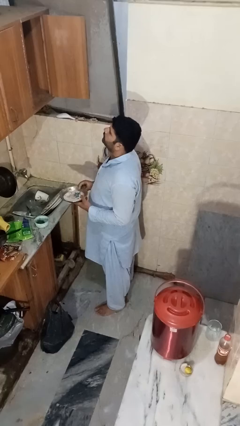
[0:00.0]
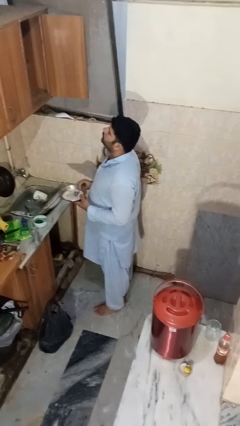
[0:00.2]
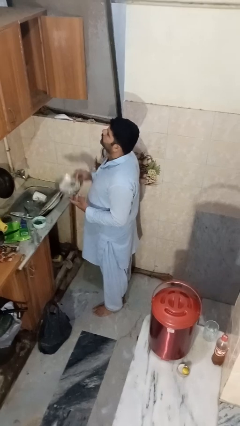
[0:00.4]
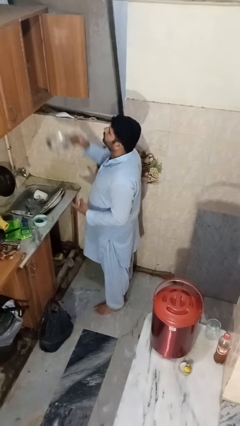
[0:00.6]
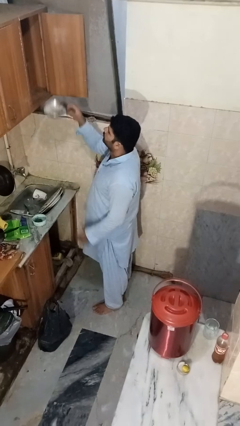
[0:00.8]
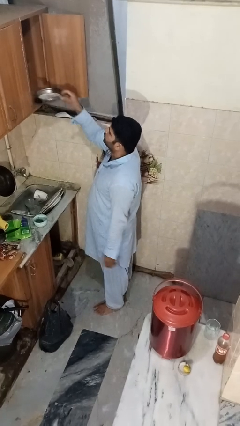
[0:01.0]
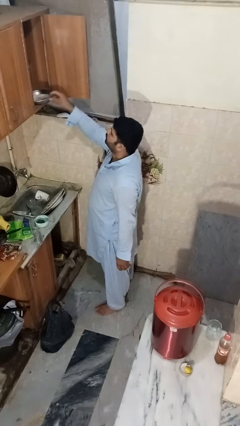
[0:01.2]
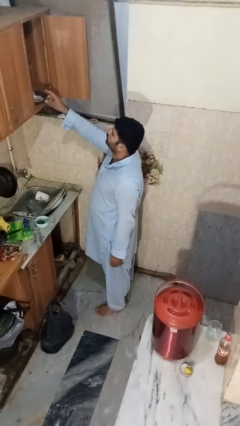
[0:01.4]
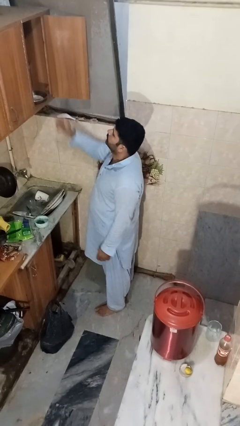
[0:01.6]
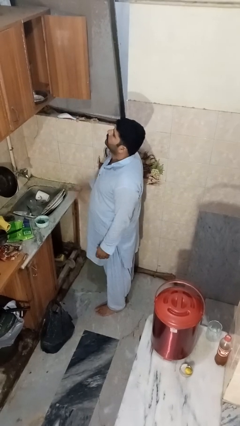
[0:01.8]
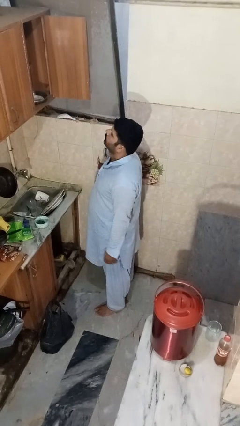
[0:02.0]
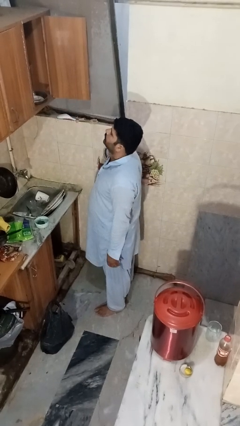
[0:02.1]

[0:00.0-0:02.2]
person puts object in cabinet

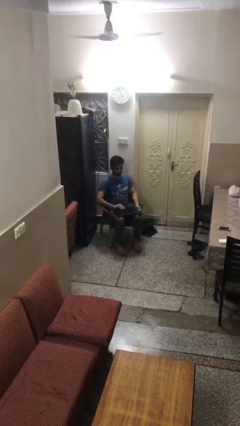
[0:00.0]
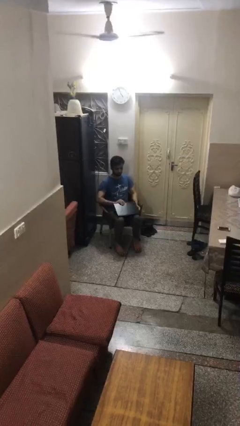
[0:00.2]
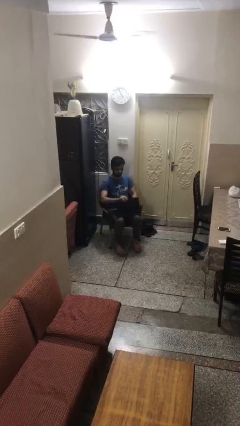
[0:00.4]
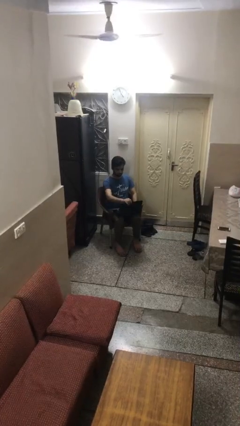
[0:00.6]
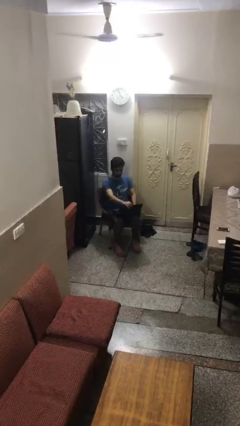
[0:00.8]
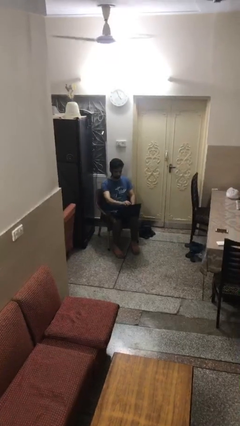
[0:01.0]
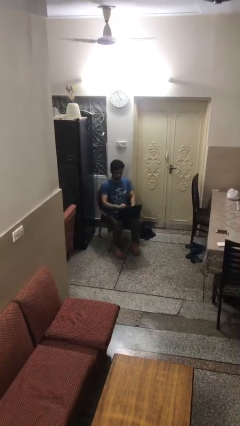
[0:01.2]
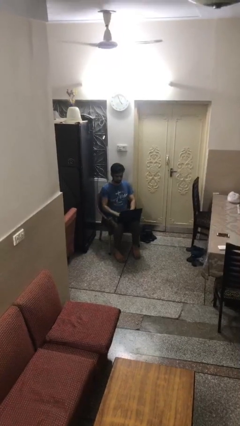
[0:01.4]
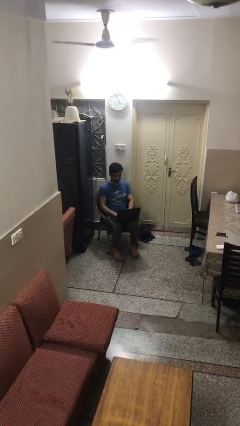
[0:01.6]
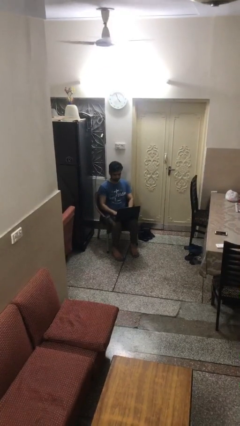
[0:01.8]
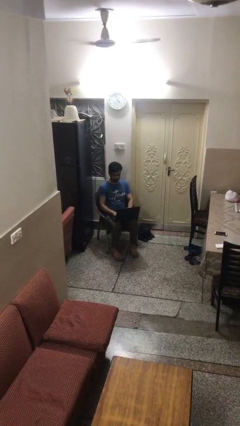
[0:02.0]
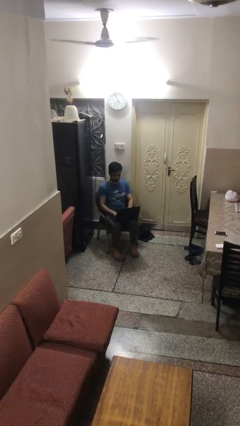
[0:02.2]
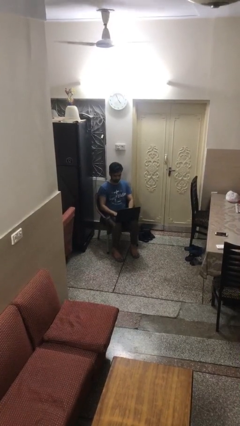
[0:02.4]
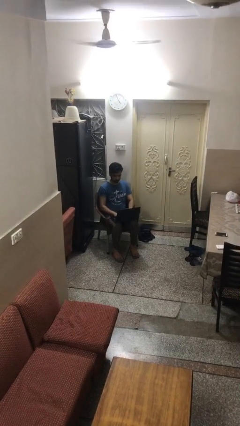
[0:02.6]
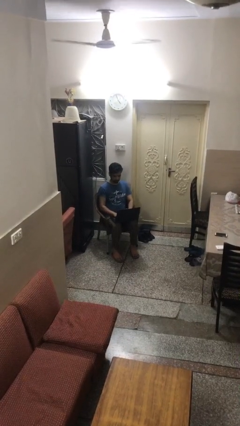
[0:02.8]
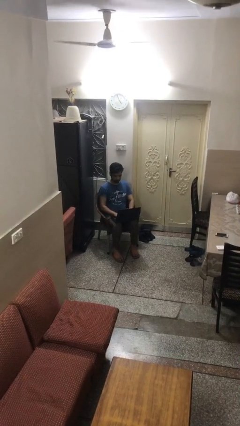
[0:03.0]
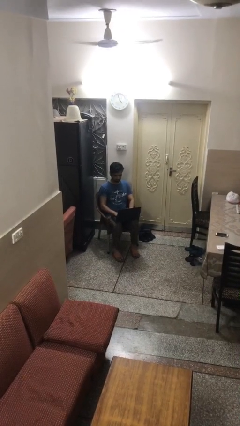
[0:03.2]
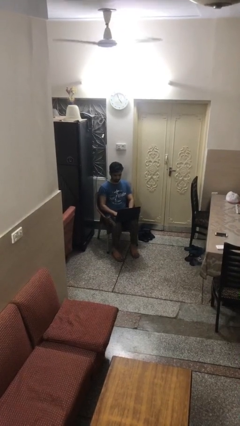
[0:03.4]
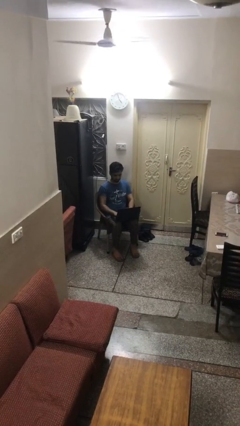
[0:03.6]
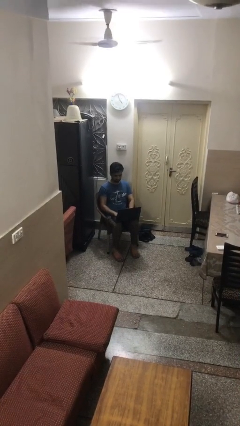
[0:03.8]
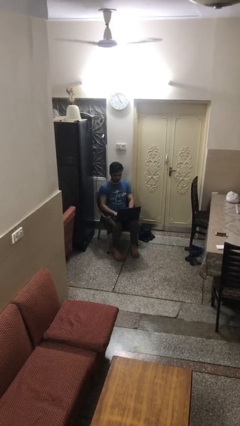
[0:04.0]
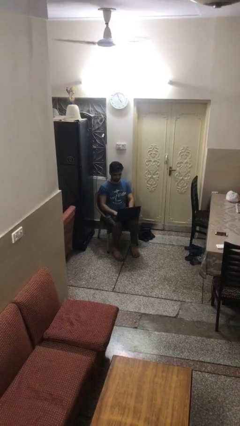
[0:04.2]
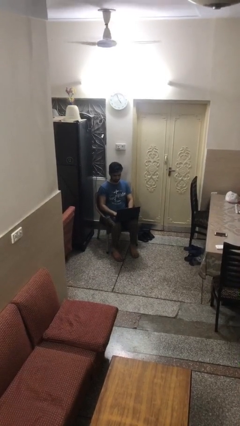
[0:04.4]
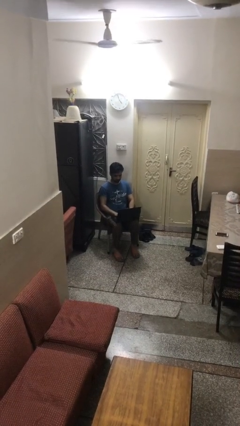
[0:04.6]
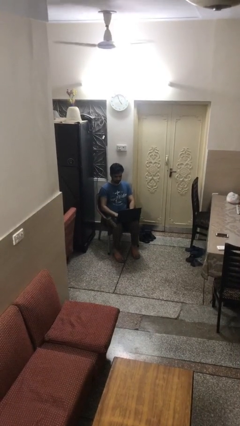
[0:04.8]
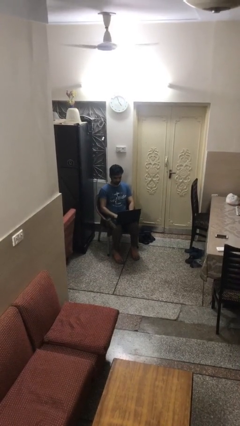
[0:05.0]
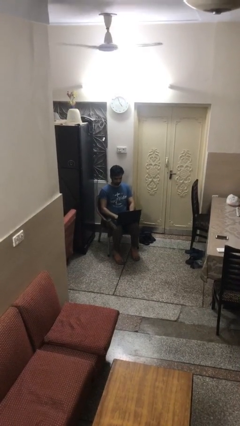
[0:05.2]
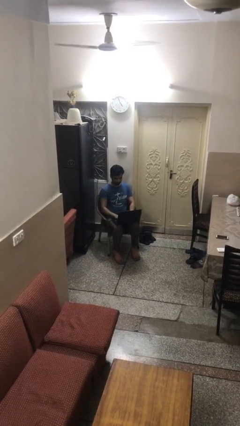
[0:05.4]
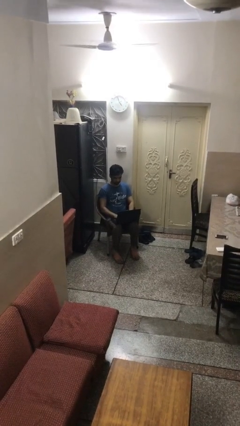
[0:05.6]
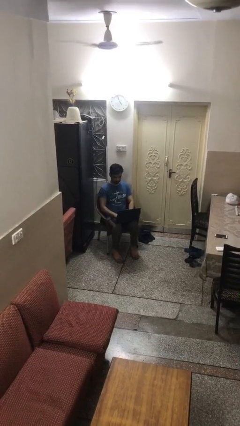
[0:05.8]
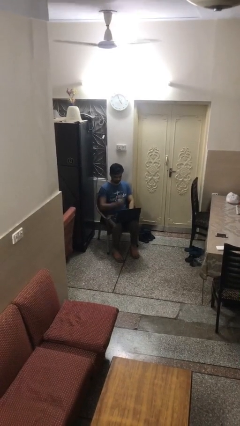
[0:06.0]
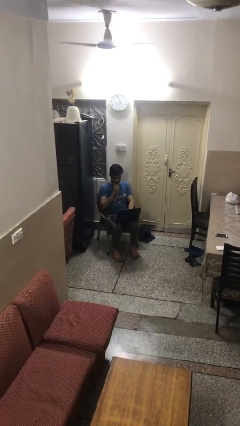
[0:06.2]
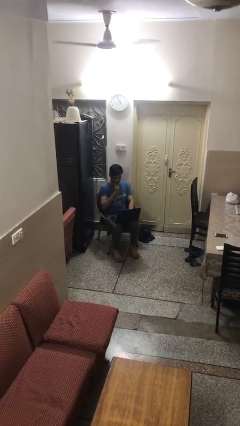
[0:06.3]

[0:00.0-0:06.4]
person interacts with laptop

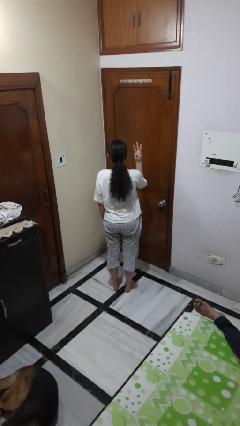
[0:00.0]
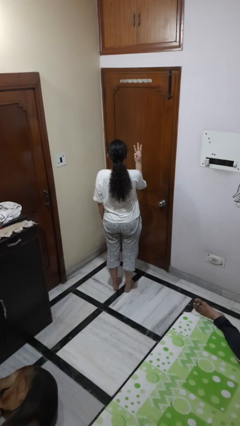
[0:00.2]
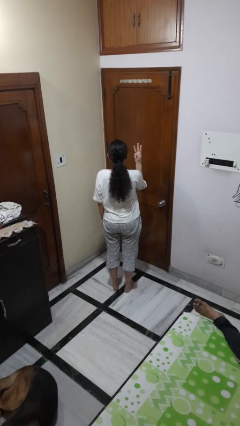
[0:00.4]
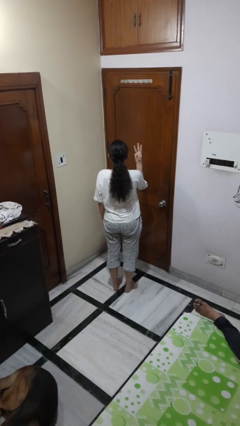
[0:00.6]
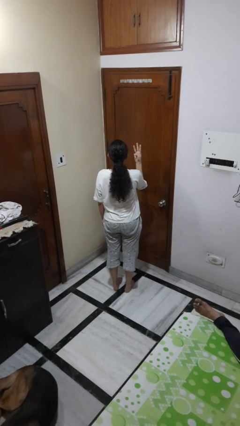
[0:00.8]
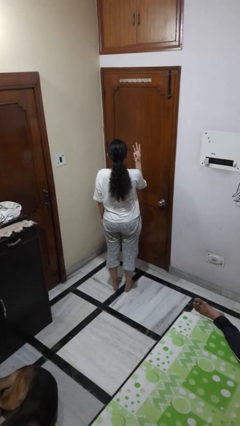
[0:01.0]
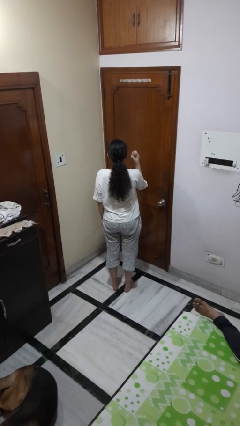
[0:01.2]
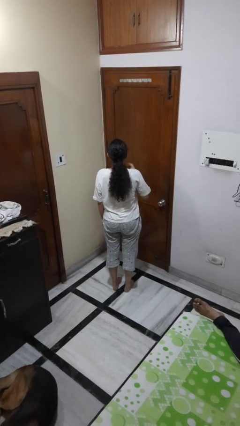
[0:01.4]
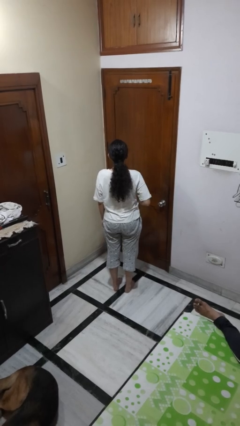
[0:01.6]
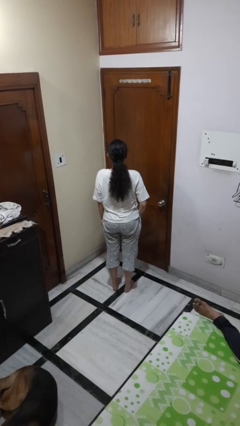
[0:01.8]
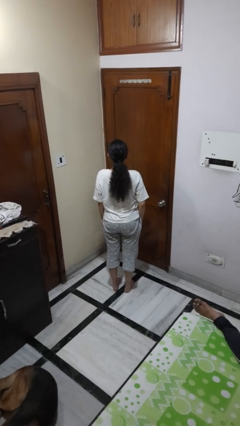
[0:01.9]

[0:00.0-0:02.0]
person gestures number three

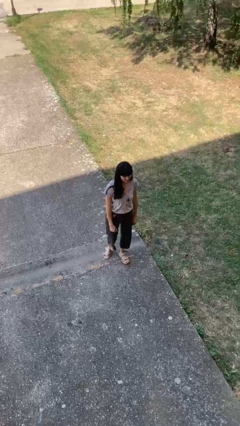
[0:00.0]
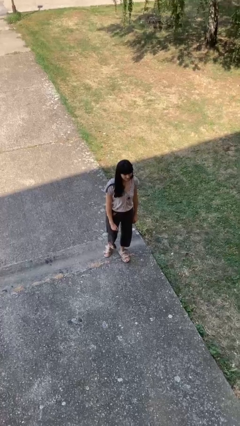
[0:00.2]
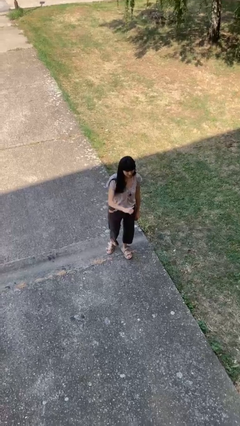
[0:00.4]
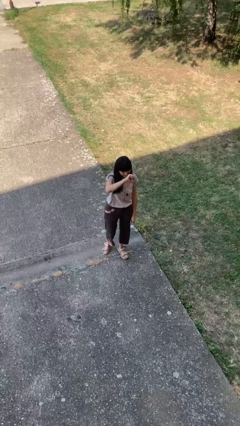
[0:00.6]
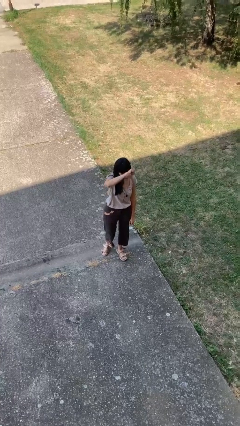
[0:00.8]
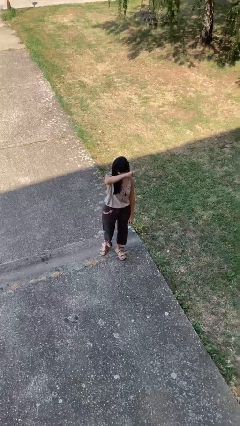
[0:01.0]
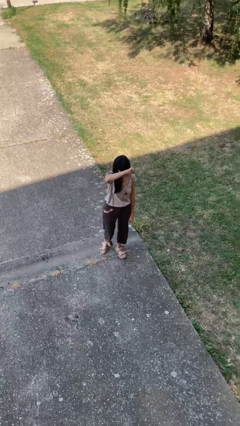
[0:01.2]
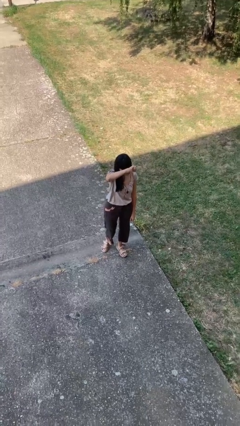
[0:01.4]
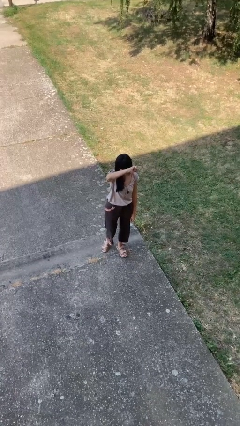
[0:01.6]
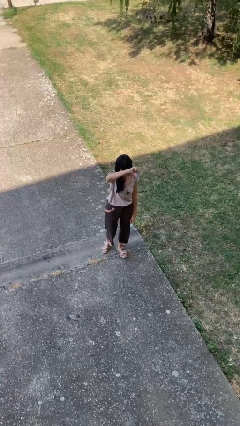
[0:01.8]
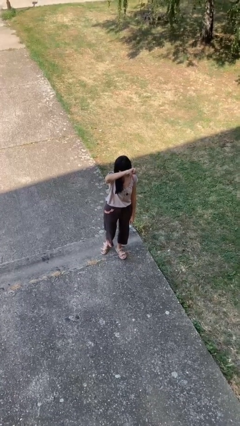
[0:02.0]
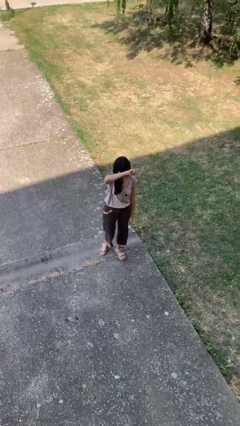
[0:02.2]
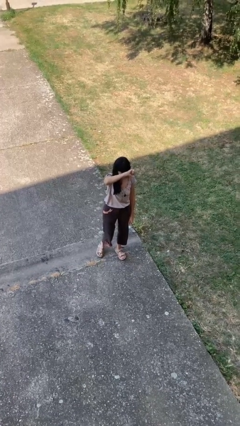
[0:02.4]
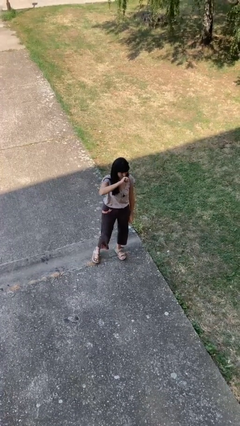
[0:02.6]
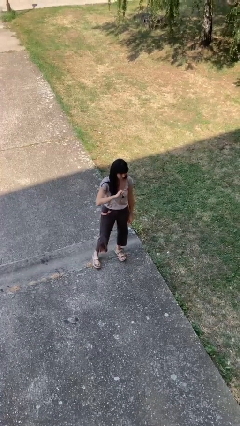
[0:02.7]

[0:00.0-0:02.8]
person gestures thumbs down

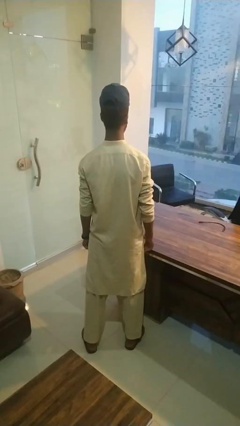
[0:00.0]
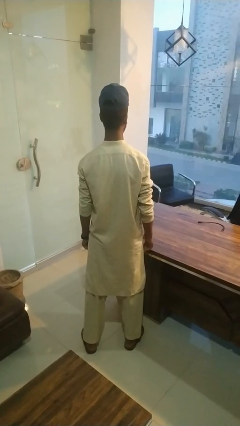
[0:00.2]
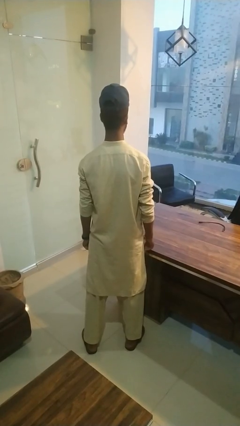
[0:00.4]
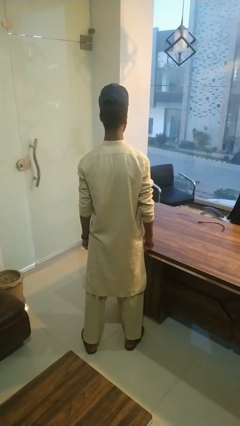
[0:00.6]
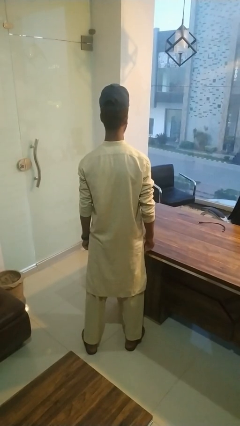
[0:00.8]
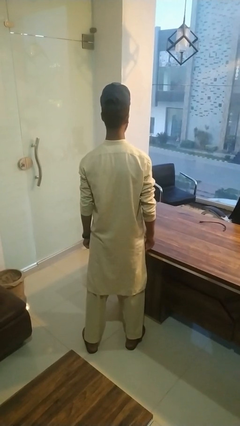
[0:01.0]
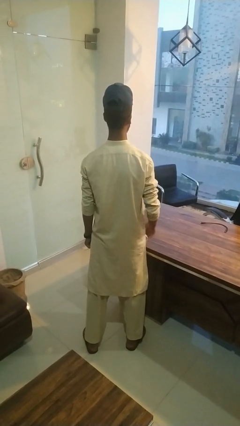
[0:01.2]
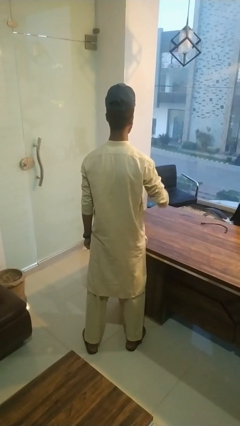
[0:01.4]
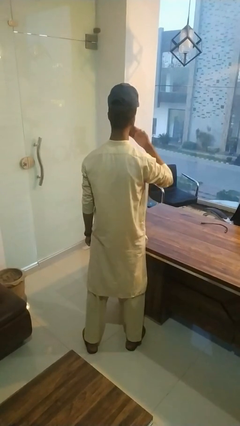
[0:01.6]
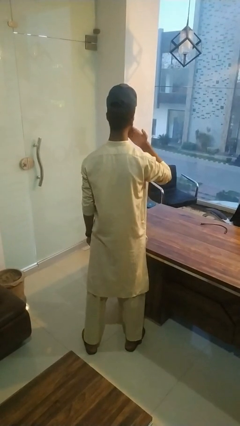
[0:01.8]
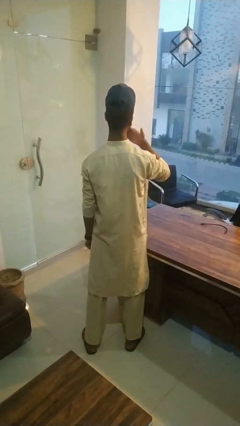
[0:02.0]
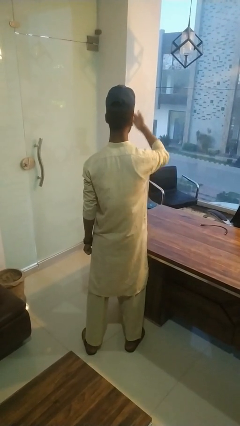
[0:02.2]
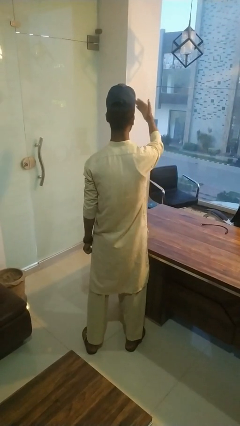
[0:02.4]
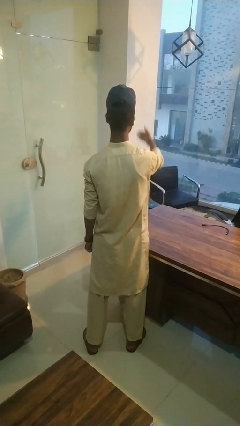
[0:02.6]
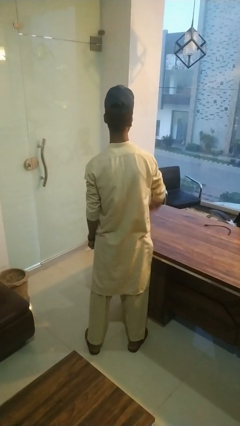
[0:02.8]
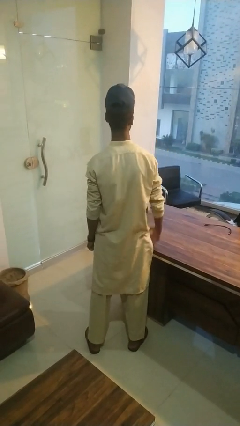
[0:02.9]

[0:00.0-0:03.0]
person gestures blow kiss

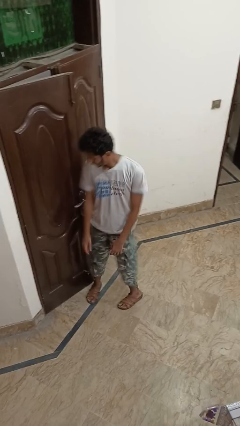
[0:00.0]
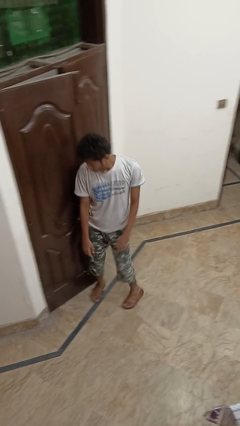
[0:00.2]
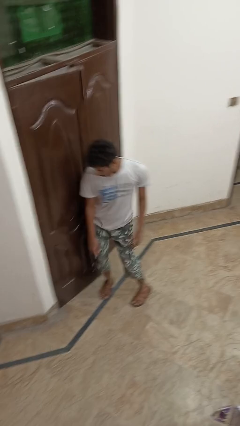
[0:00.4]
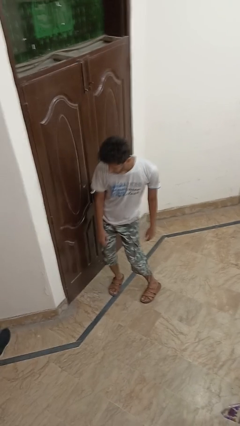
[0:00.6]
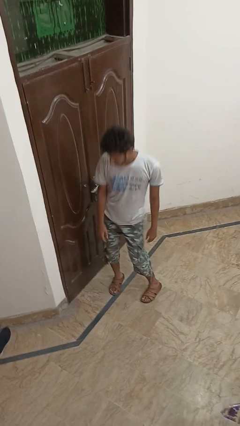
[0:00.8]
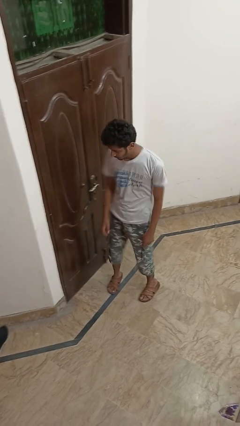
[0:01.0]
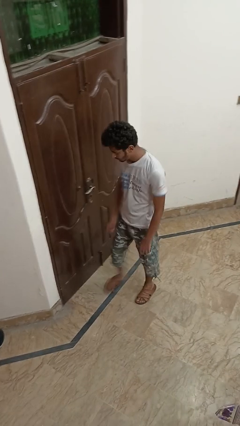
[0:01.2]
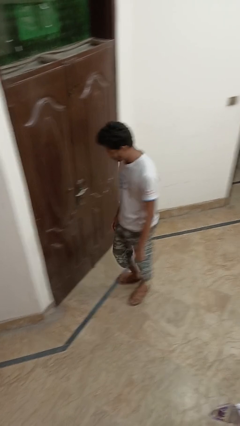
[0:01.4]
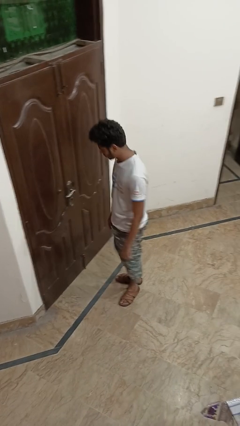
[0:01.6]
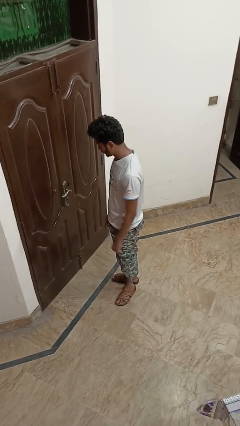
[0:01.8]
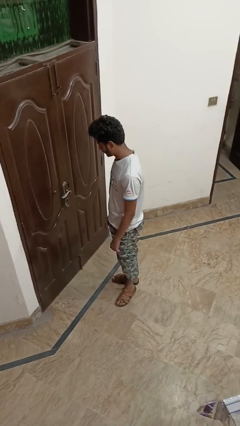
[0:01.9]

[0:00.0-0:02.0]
person closes door with hip
